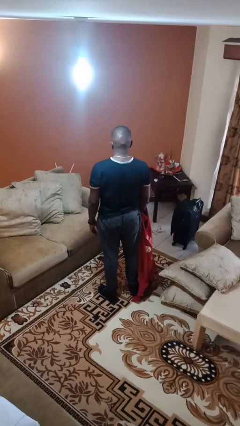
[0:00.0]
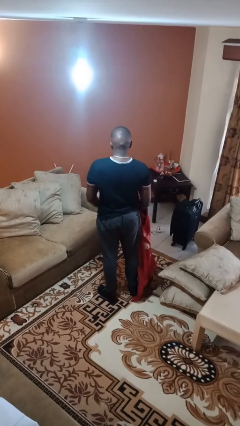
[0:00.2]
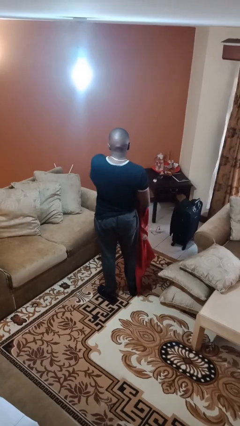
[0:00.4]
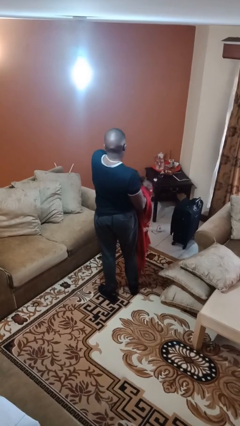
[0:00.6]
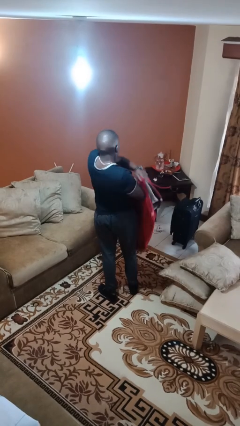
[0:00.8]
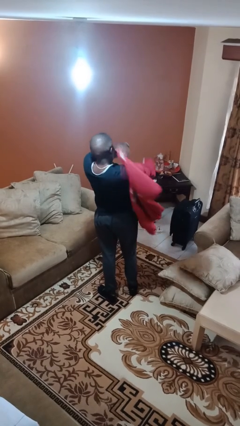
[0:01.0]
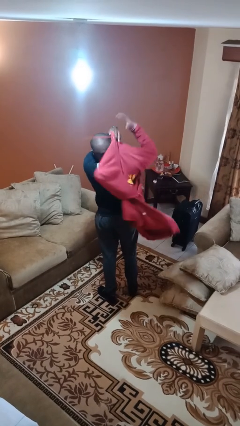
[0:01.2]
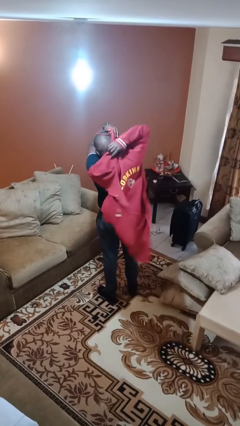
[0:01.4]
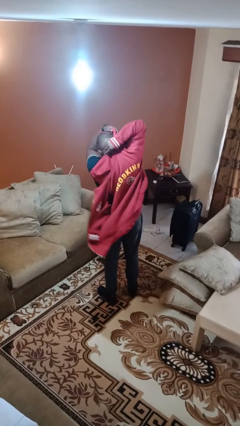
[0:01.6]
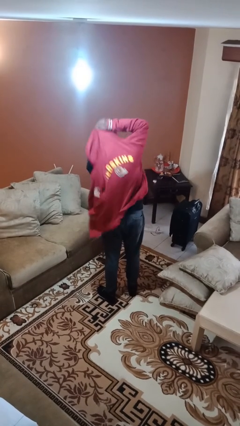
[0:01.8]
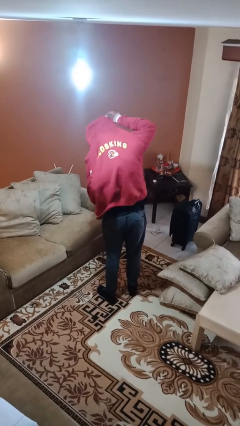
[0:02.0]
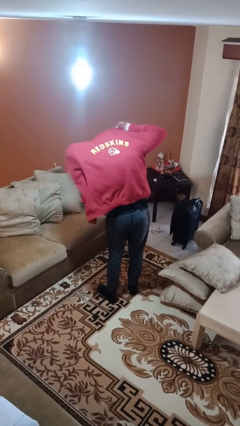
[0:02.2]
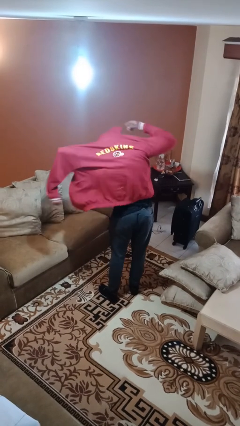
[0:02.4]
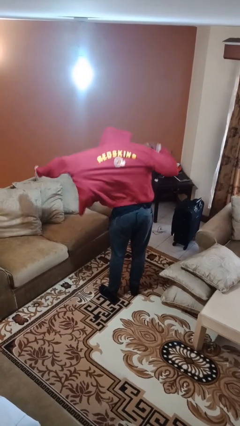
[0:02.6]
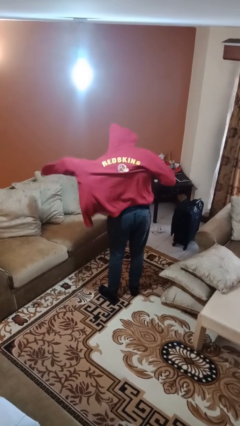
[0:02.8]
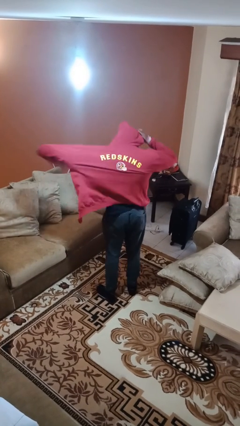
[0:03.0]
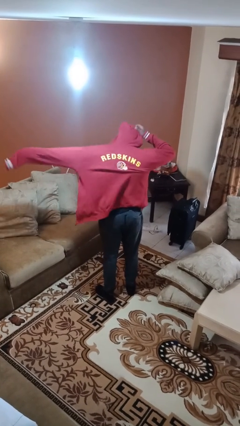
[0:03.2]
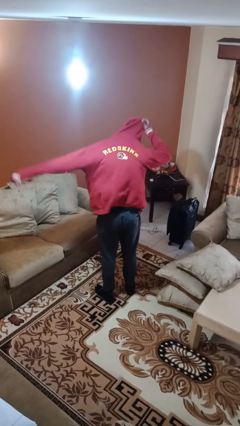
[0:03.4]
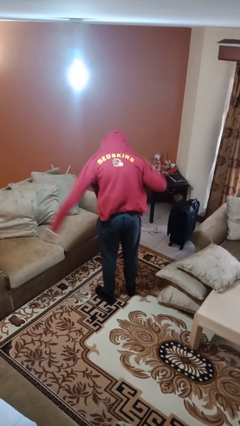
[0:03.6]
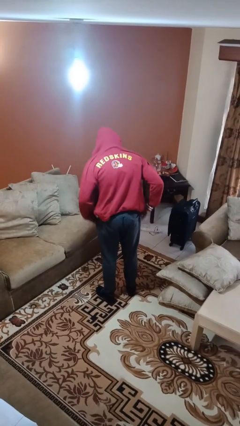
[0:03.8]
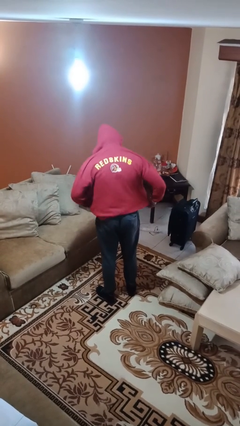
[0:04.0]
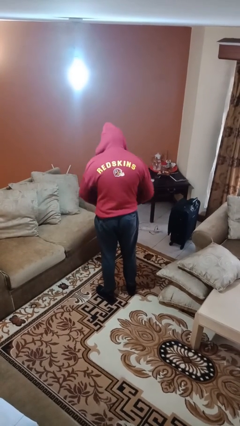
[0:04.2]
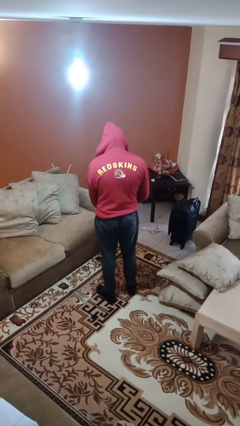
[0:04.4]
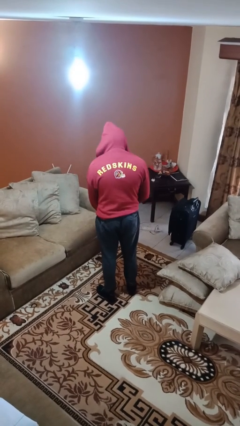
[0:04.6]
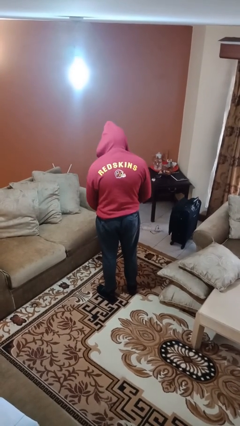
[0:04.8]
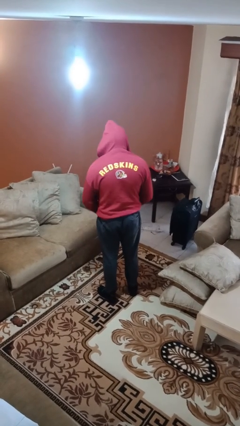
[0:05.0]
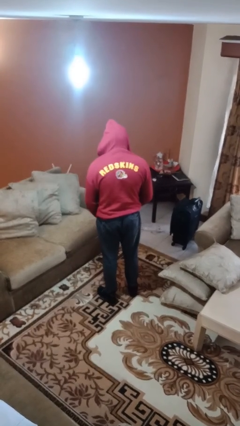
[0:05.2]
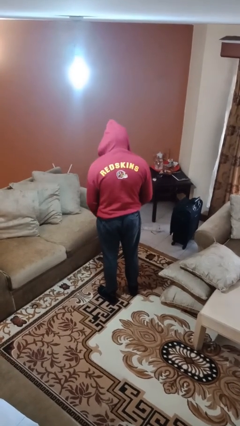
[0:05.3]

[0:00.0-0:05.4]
person puts on hoodie

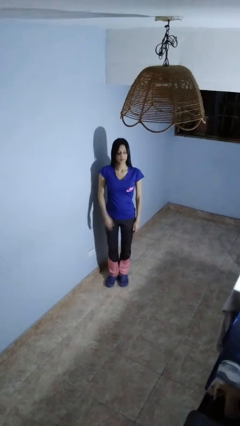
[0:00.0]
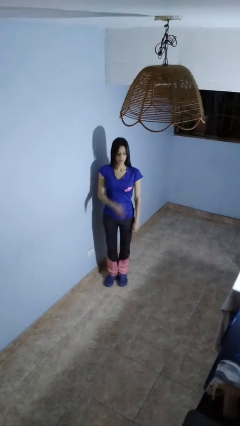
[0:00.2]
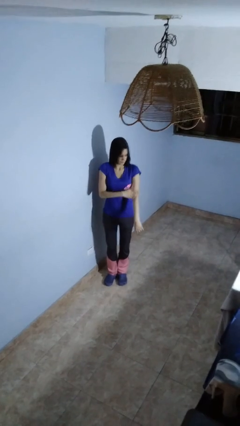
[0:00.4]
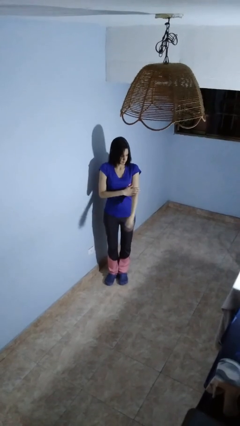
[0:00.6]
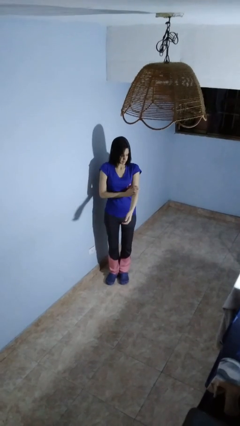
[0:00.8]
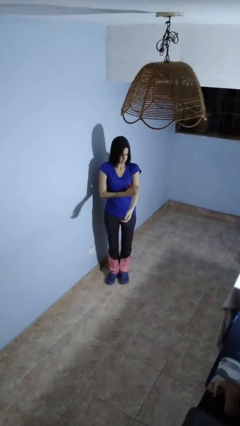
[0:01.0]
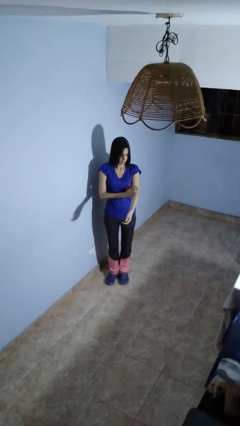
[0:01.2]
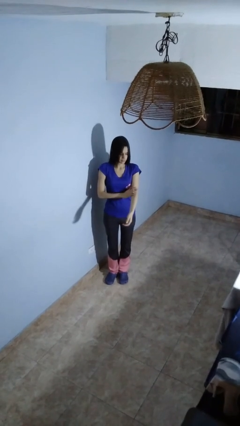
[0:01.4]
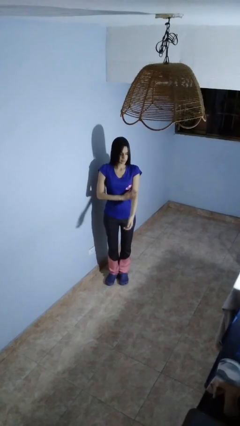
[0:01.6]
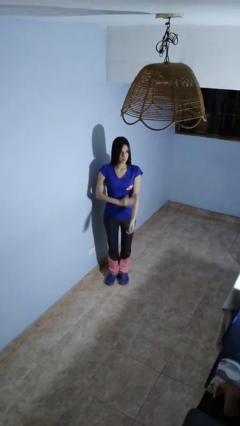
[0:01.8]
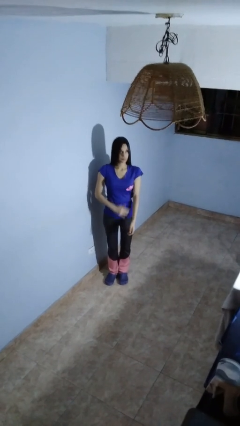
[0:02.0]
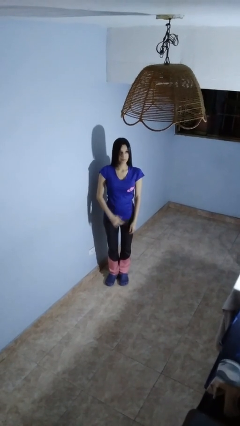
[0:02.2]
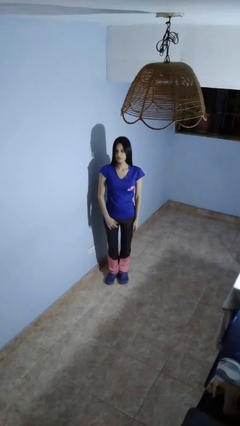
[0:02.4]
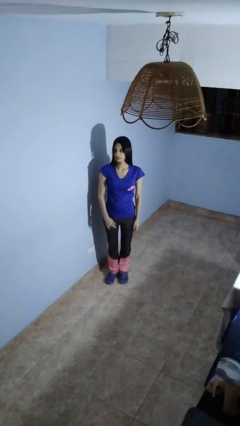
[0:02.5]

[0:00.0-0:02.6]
person swats bug

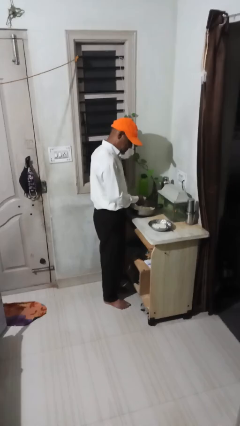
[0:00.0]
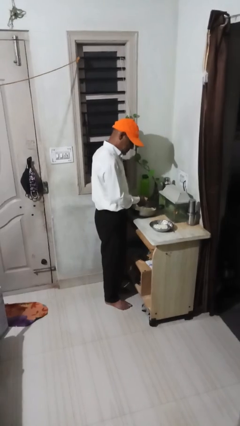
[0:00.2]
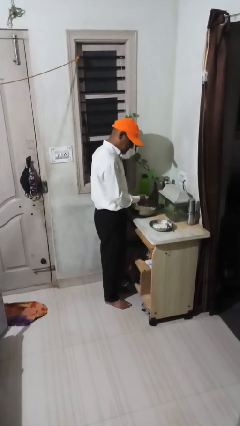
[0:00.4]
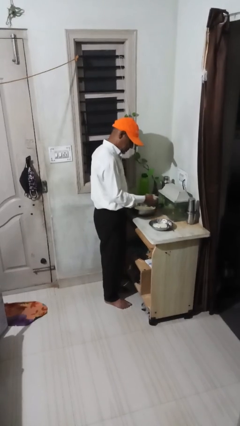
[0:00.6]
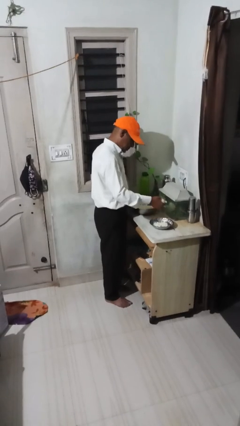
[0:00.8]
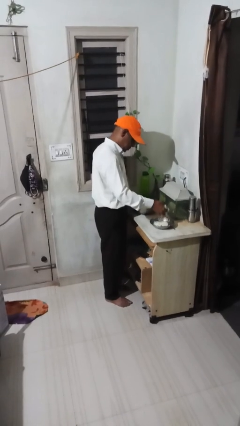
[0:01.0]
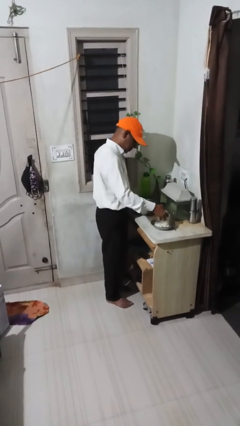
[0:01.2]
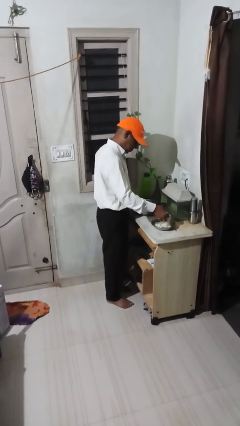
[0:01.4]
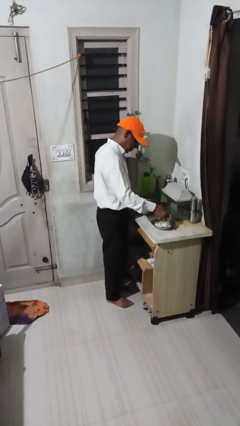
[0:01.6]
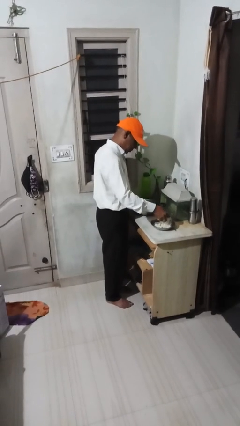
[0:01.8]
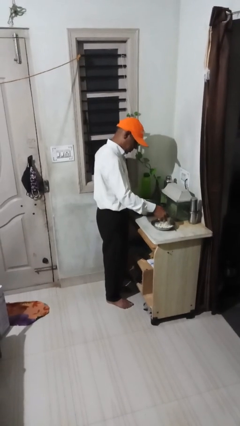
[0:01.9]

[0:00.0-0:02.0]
person pours into bowl

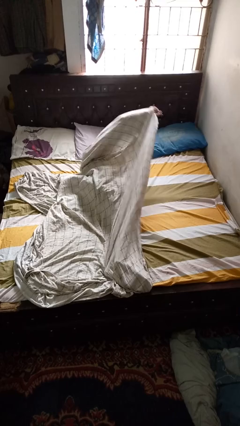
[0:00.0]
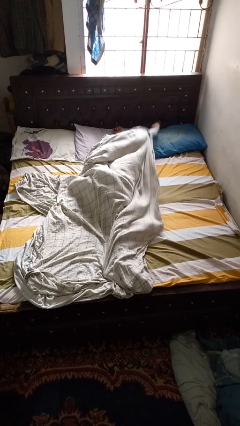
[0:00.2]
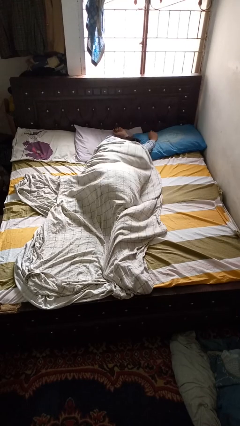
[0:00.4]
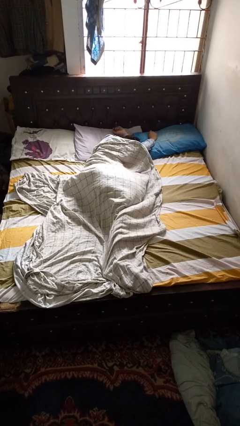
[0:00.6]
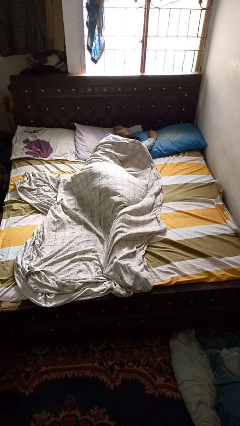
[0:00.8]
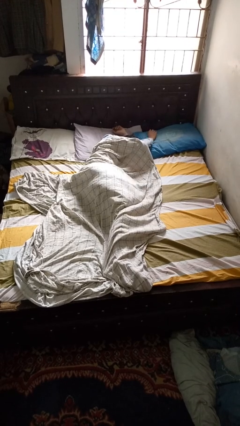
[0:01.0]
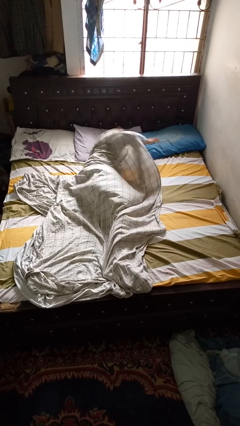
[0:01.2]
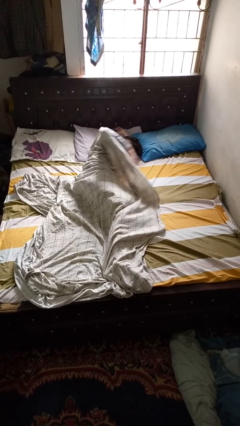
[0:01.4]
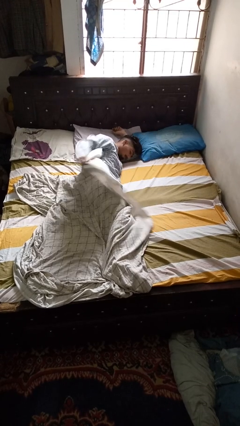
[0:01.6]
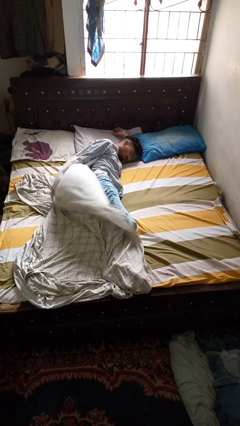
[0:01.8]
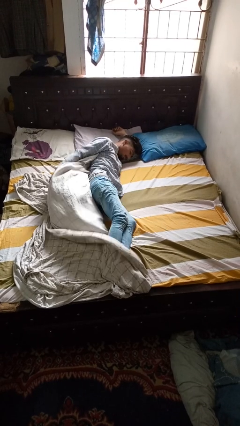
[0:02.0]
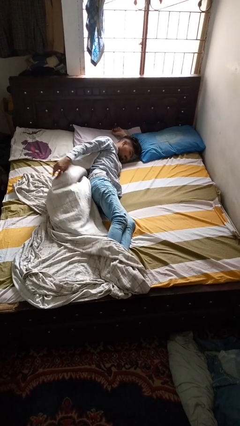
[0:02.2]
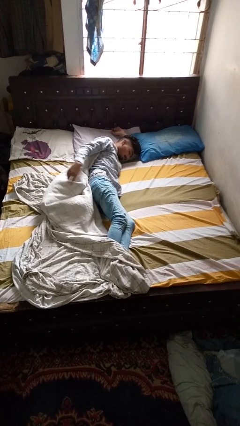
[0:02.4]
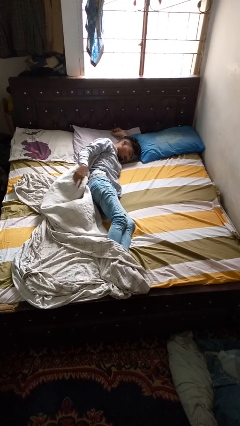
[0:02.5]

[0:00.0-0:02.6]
person uncovers with bedsheets

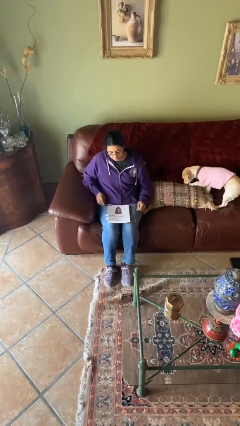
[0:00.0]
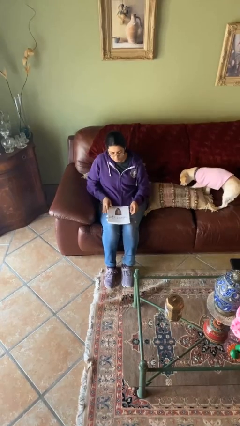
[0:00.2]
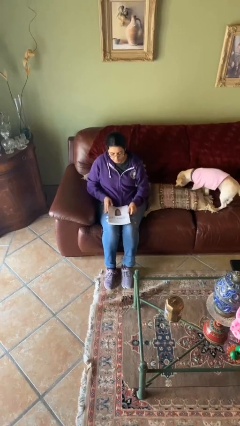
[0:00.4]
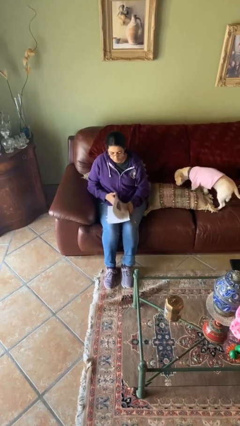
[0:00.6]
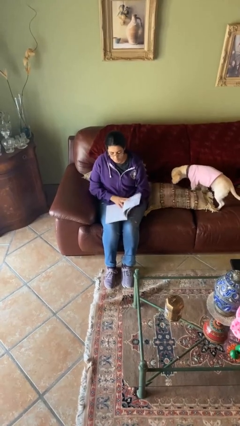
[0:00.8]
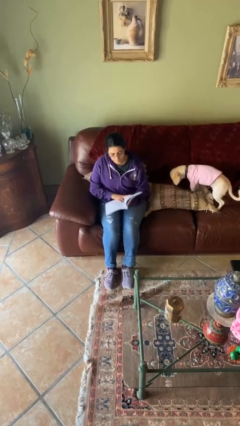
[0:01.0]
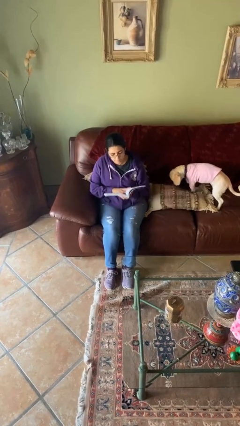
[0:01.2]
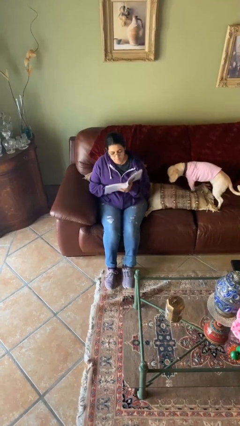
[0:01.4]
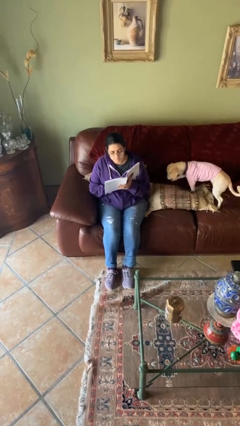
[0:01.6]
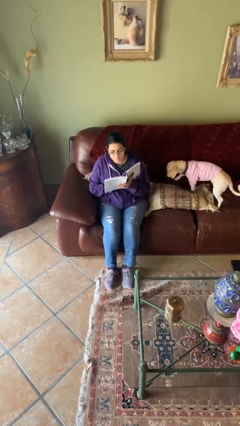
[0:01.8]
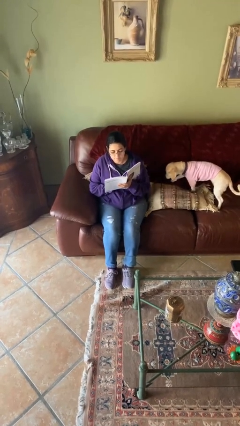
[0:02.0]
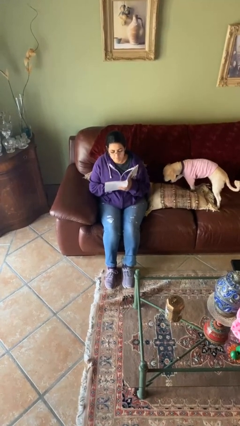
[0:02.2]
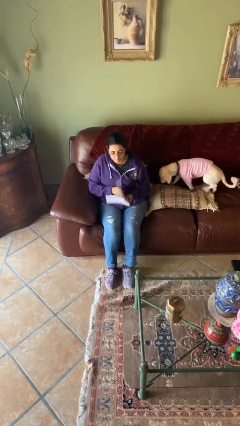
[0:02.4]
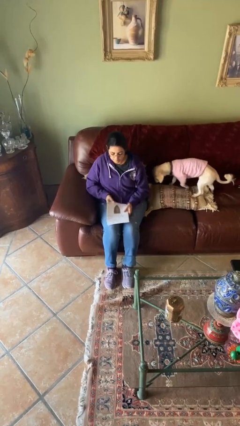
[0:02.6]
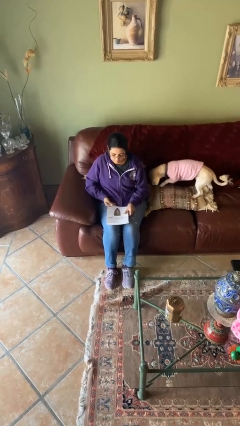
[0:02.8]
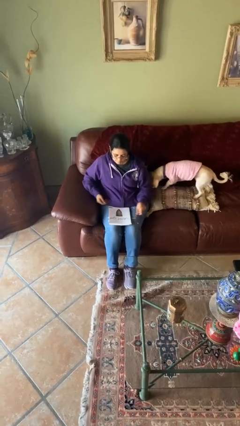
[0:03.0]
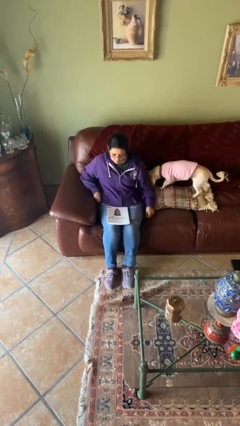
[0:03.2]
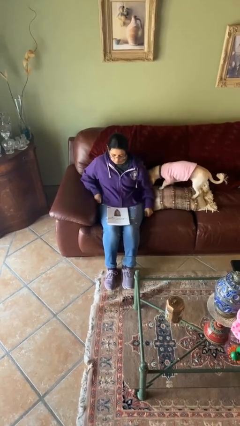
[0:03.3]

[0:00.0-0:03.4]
person reads document

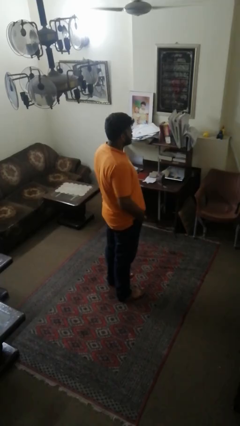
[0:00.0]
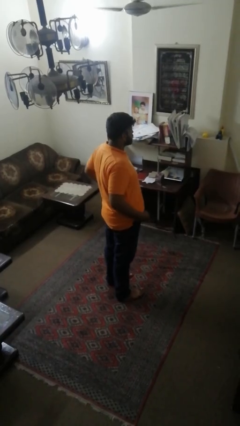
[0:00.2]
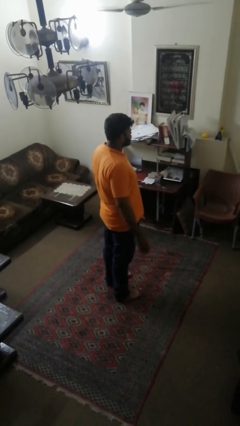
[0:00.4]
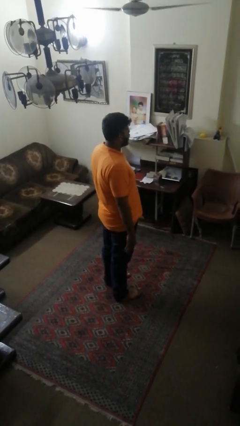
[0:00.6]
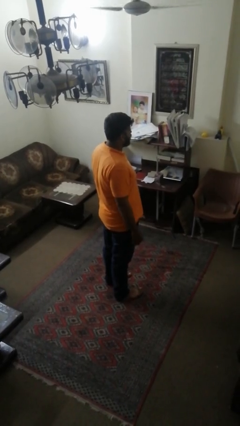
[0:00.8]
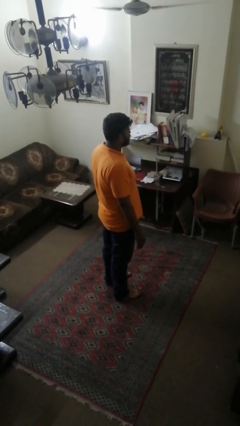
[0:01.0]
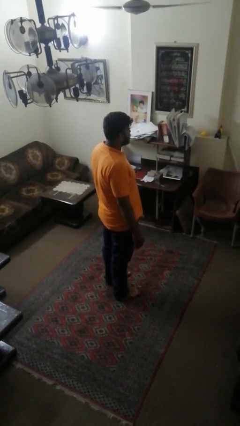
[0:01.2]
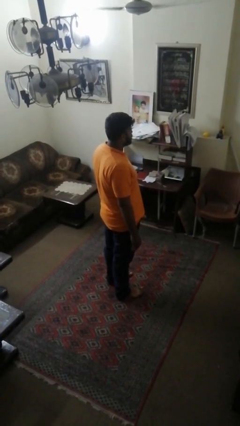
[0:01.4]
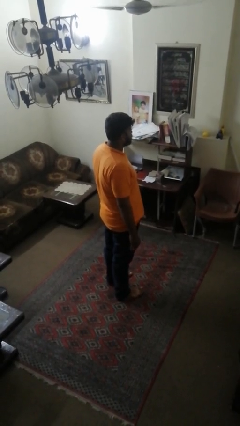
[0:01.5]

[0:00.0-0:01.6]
person puts hands in back pockets
